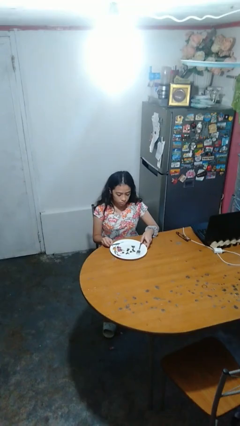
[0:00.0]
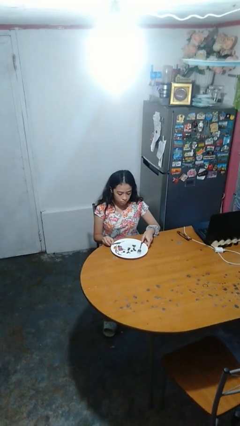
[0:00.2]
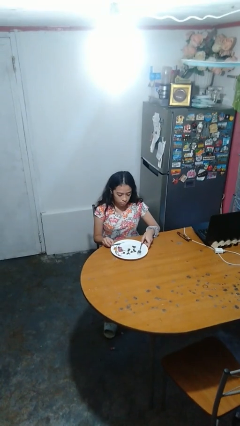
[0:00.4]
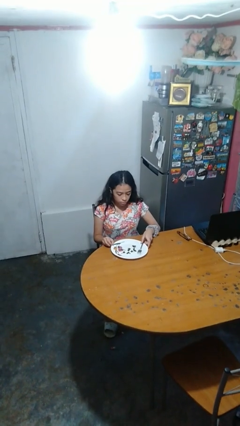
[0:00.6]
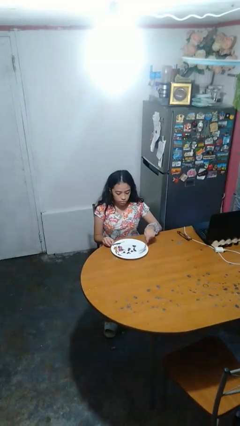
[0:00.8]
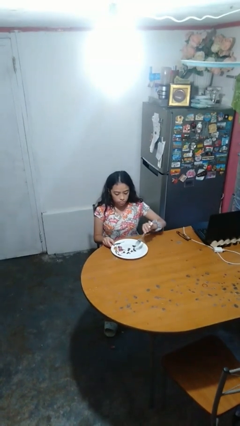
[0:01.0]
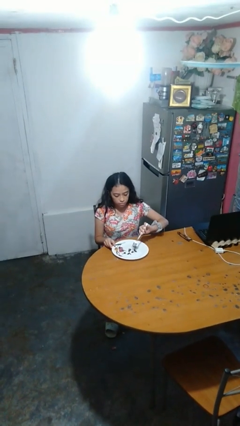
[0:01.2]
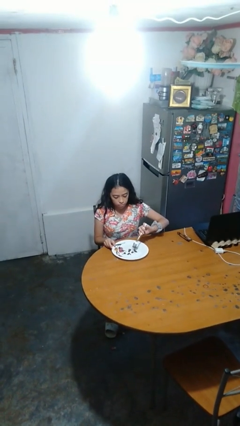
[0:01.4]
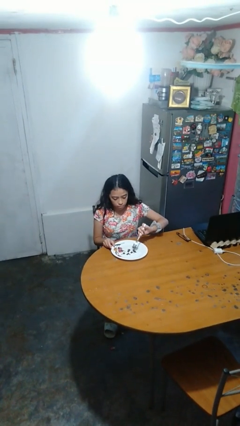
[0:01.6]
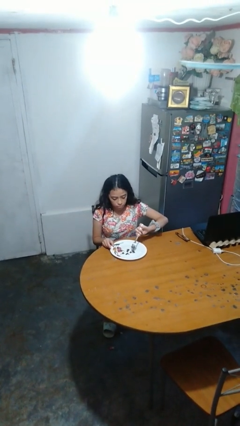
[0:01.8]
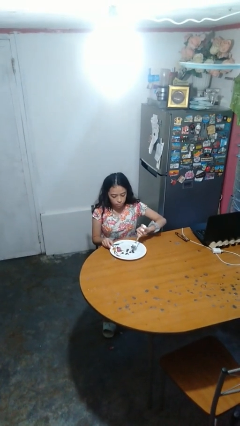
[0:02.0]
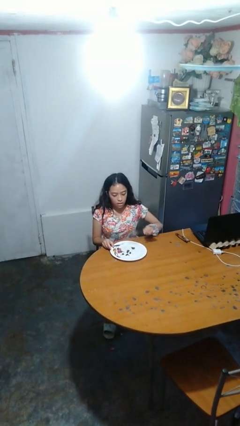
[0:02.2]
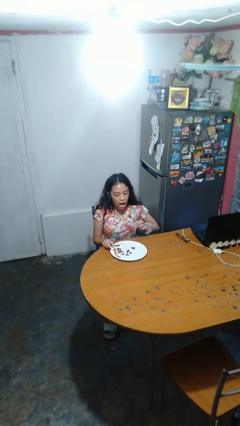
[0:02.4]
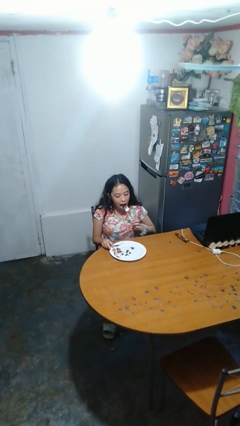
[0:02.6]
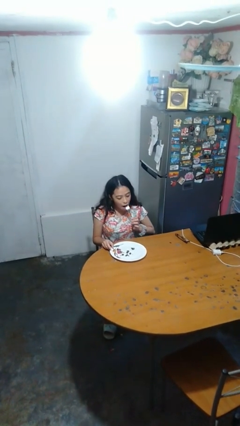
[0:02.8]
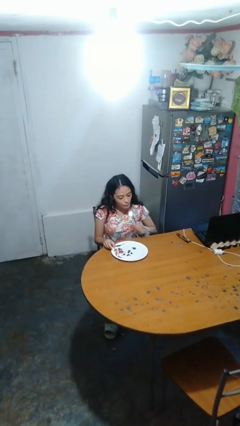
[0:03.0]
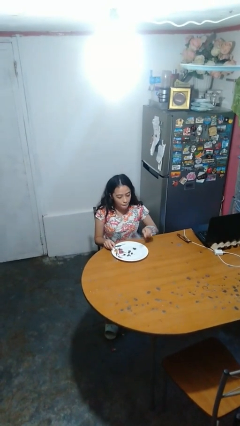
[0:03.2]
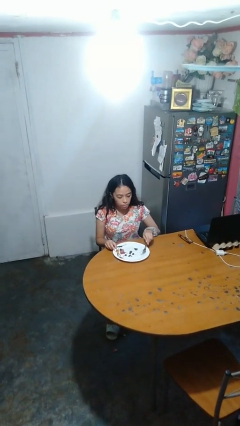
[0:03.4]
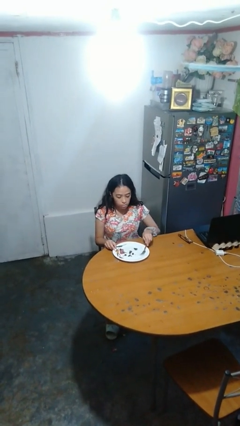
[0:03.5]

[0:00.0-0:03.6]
person eats with utensil

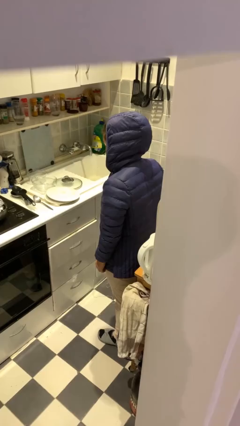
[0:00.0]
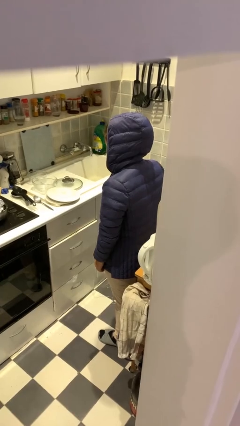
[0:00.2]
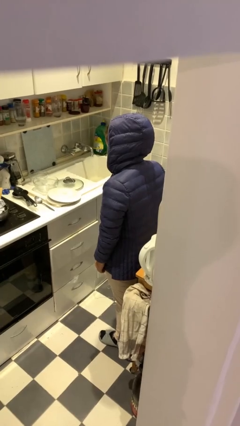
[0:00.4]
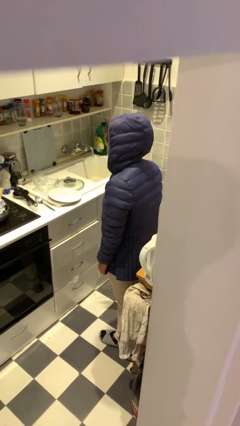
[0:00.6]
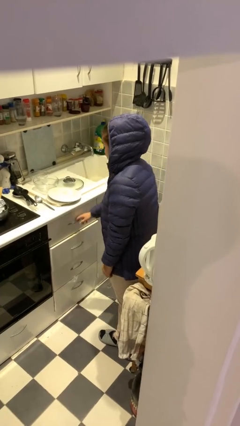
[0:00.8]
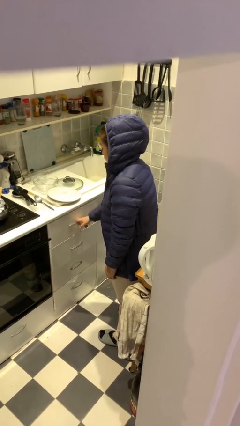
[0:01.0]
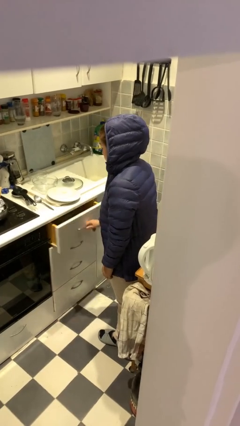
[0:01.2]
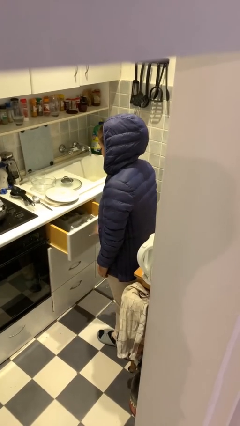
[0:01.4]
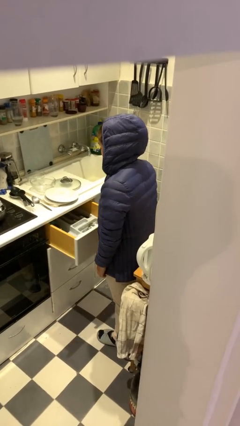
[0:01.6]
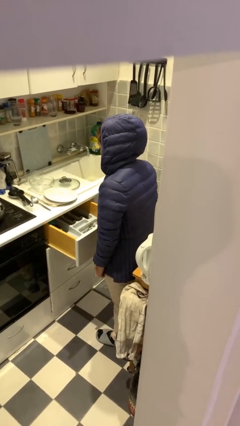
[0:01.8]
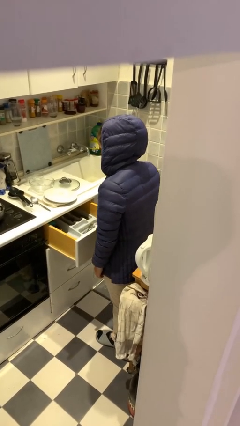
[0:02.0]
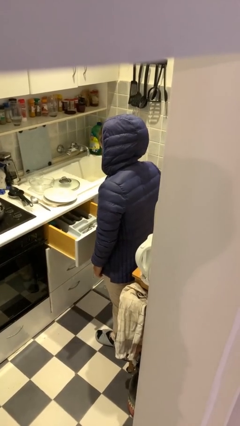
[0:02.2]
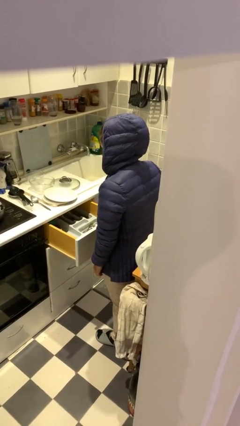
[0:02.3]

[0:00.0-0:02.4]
person opens kitchen drawer

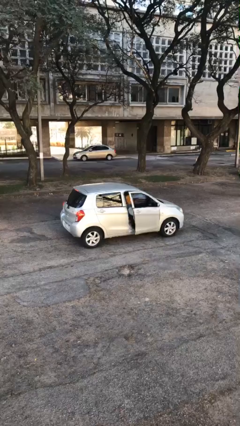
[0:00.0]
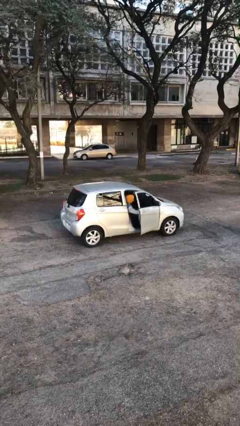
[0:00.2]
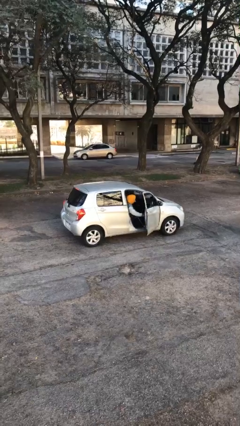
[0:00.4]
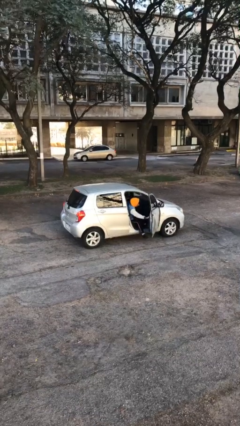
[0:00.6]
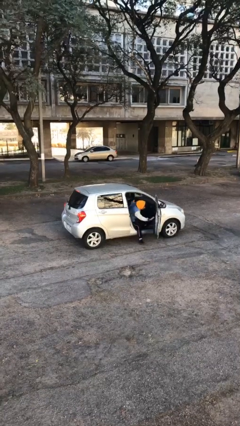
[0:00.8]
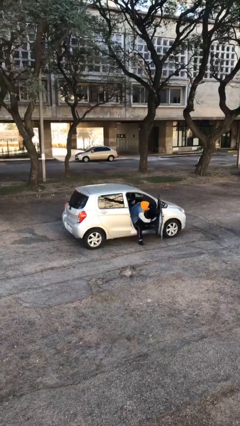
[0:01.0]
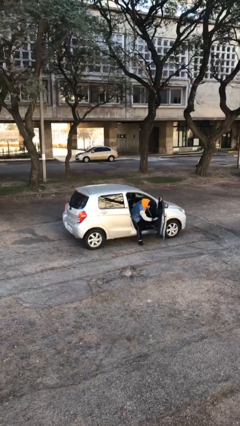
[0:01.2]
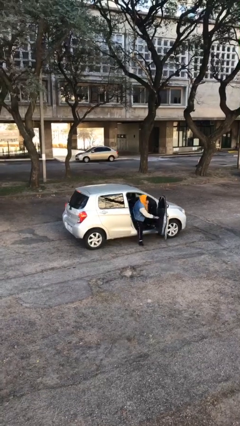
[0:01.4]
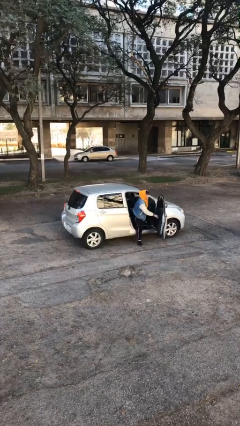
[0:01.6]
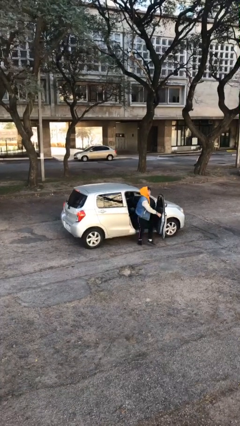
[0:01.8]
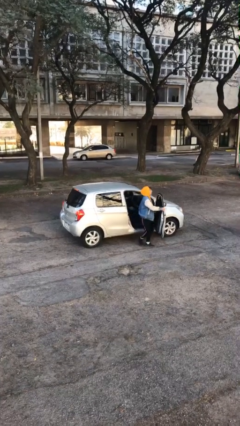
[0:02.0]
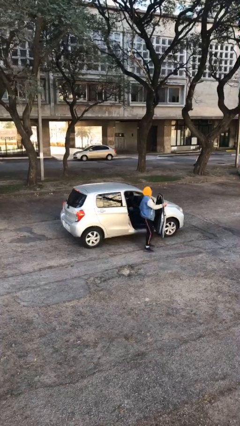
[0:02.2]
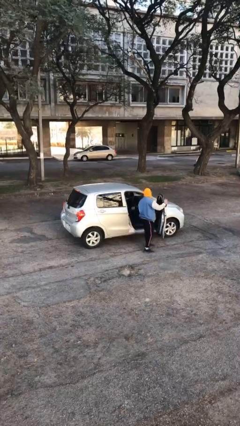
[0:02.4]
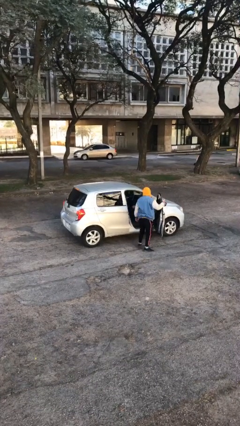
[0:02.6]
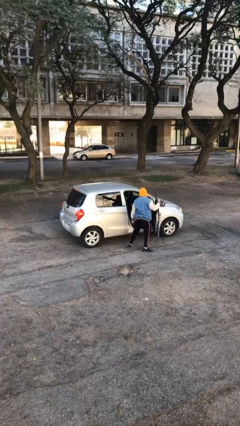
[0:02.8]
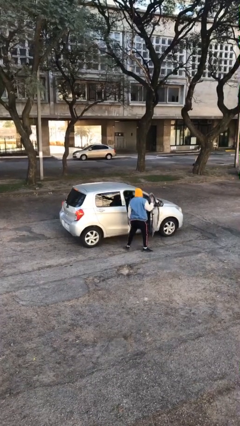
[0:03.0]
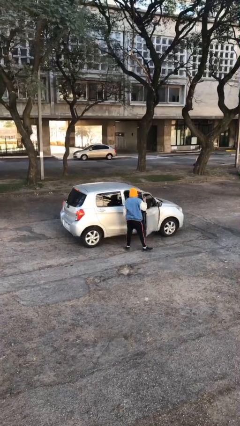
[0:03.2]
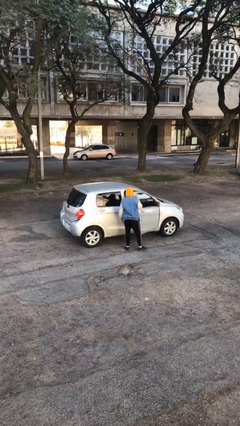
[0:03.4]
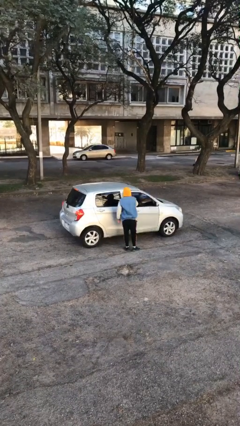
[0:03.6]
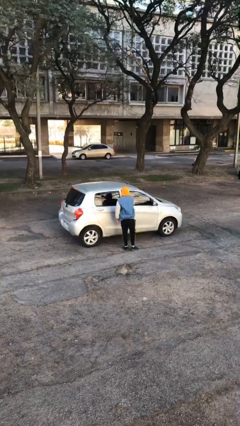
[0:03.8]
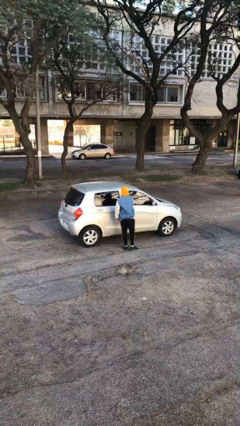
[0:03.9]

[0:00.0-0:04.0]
car drops off person

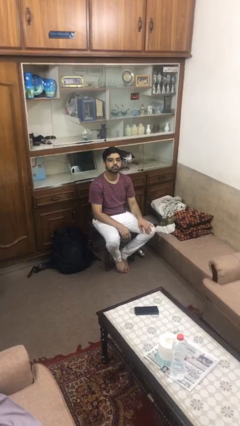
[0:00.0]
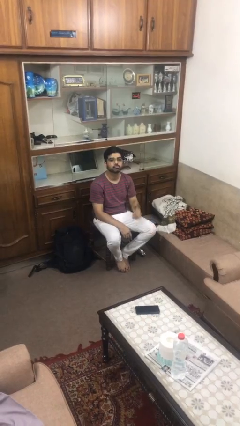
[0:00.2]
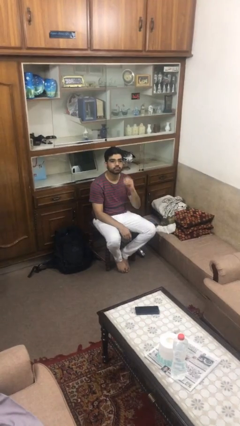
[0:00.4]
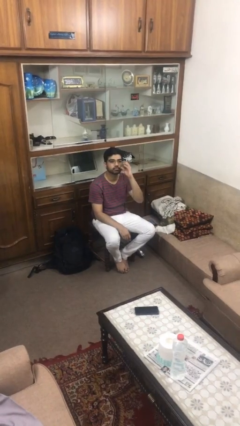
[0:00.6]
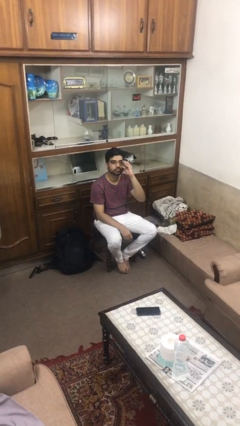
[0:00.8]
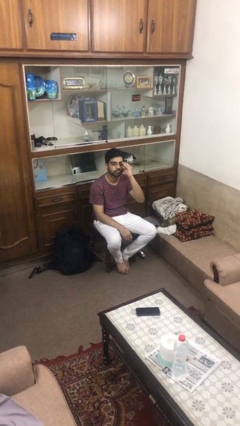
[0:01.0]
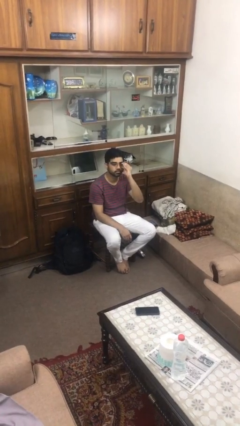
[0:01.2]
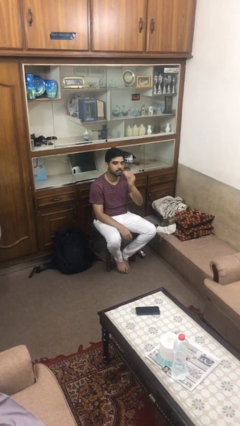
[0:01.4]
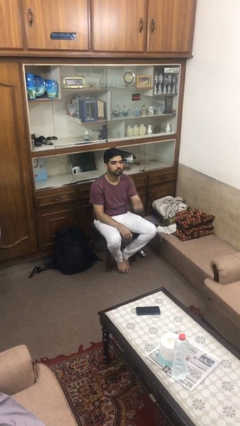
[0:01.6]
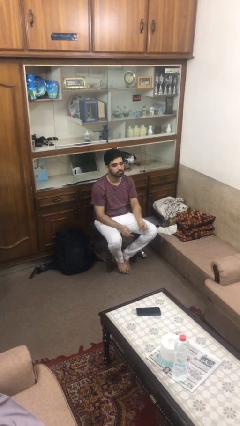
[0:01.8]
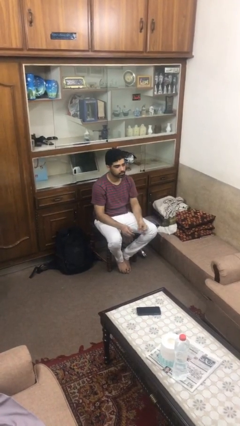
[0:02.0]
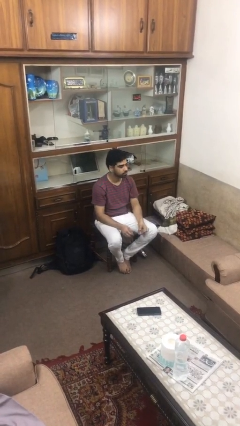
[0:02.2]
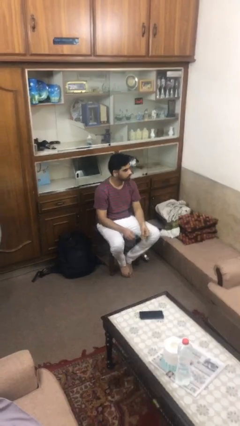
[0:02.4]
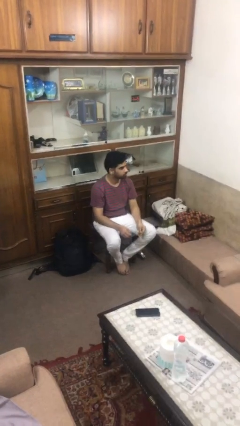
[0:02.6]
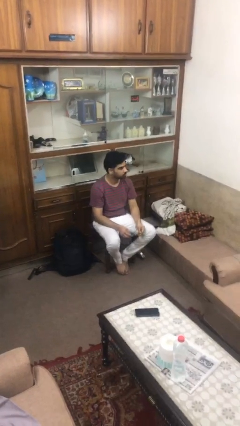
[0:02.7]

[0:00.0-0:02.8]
person takes off glasses

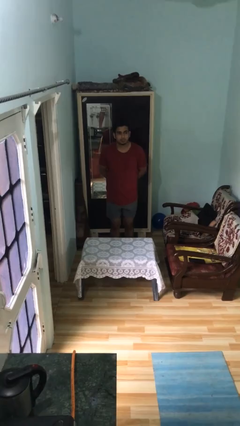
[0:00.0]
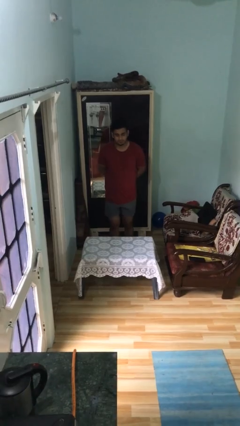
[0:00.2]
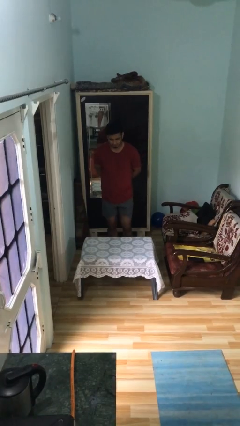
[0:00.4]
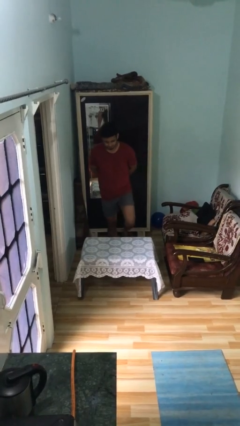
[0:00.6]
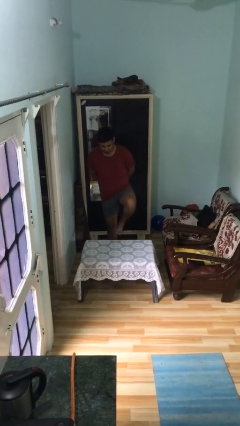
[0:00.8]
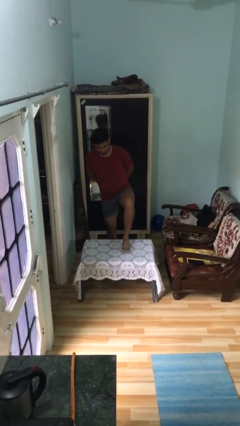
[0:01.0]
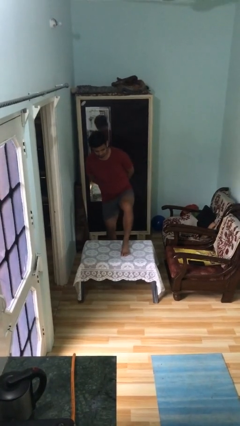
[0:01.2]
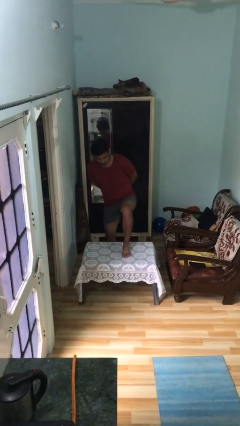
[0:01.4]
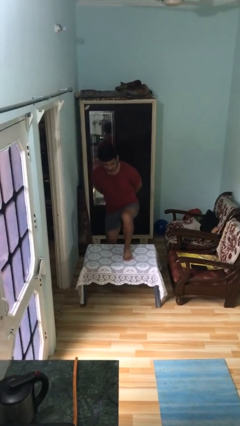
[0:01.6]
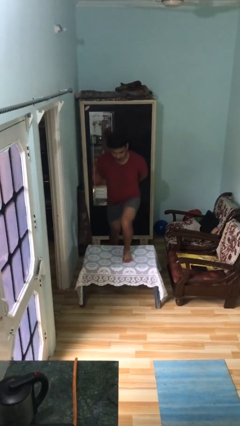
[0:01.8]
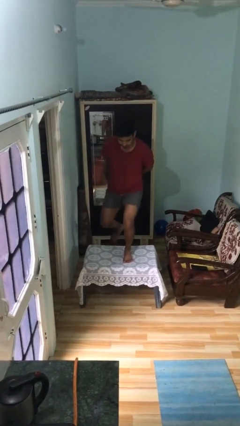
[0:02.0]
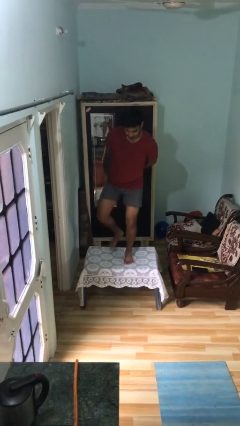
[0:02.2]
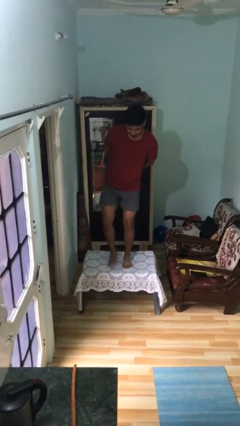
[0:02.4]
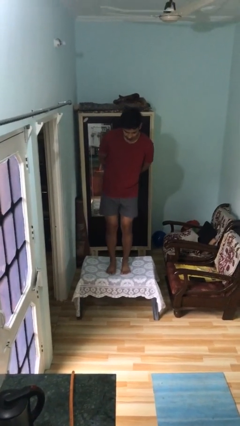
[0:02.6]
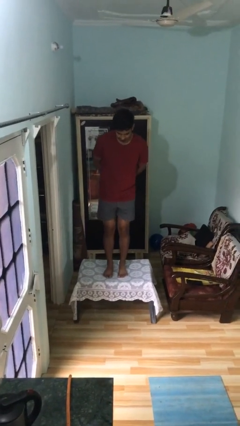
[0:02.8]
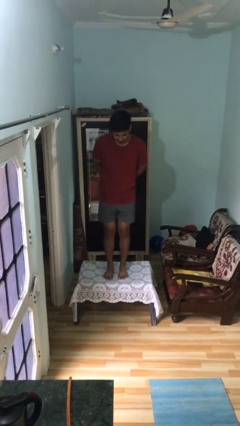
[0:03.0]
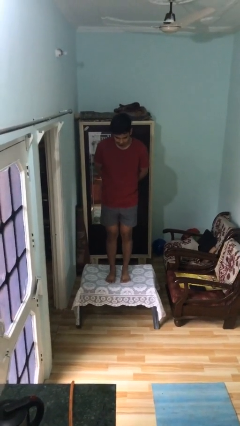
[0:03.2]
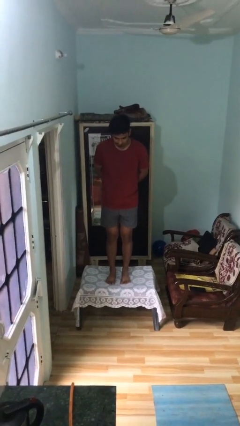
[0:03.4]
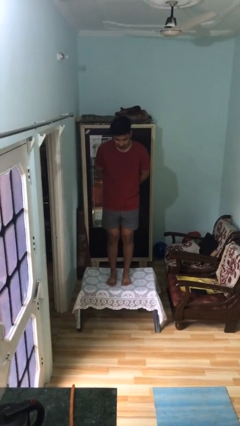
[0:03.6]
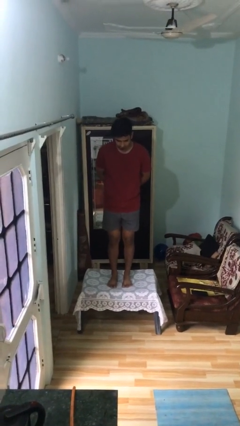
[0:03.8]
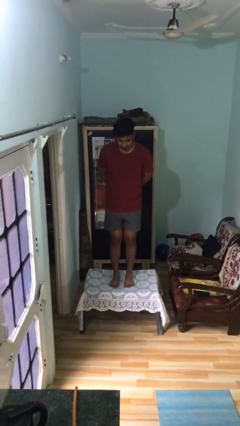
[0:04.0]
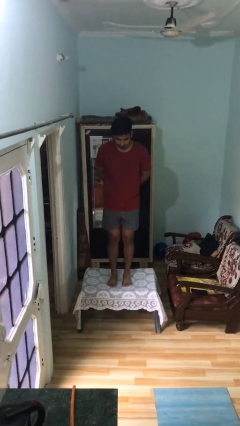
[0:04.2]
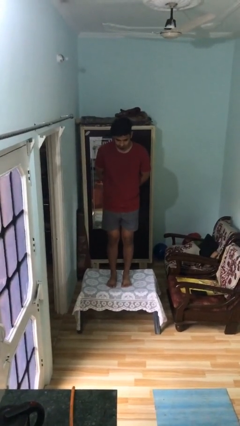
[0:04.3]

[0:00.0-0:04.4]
person climbs on table
